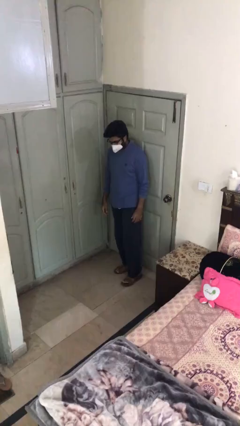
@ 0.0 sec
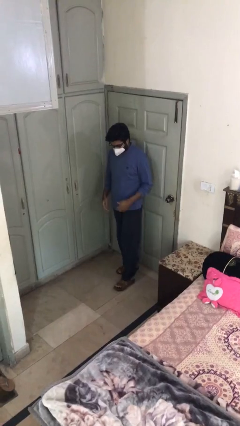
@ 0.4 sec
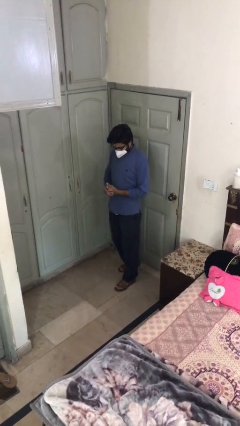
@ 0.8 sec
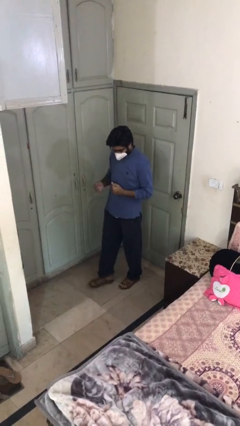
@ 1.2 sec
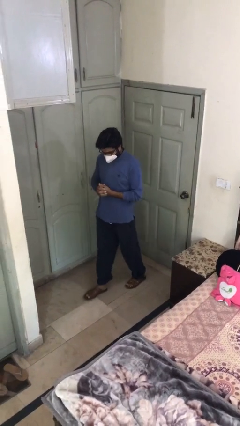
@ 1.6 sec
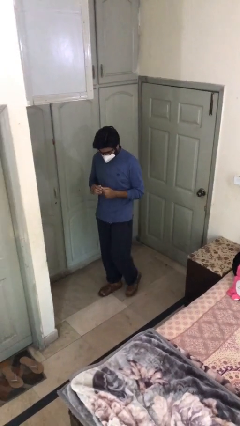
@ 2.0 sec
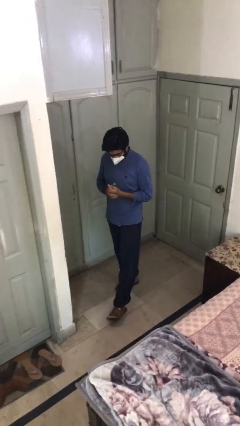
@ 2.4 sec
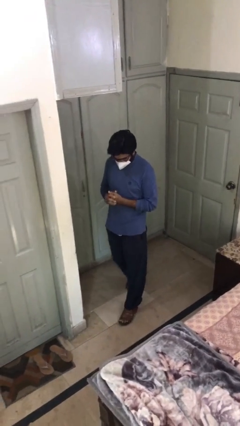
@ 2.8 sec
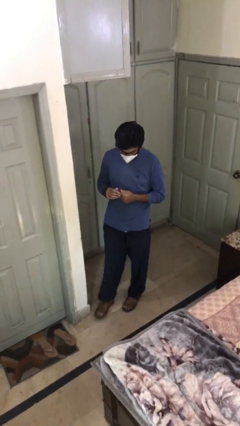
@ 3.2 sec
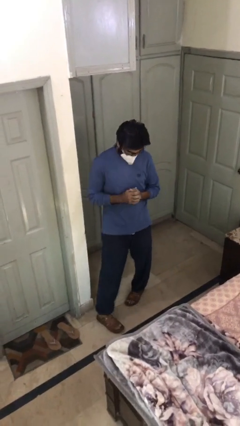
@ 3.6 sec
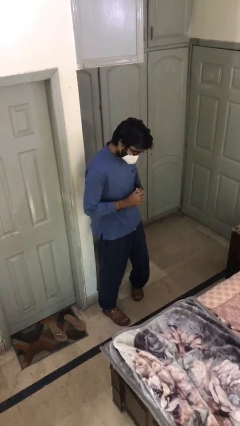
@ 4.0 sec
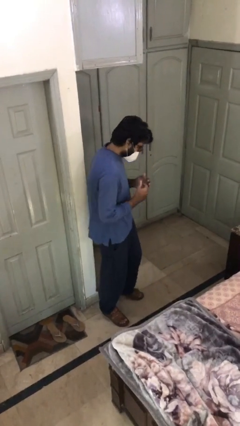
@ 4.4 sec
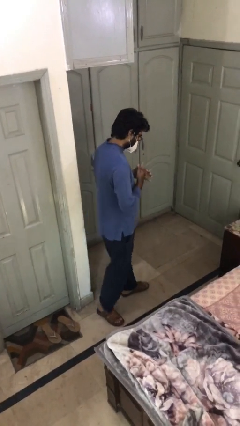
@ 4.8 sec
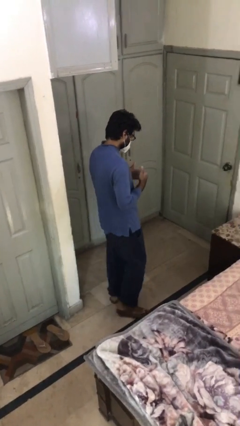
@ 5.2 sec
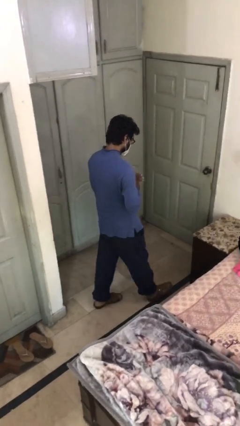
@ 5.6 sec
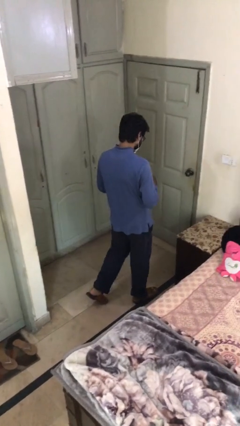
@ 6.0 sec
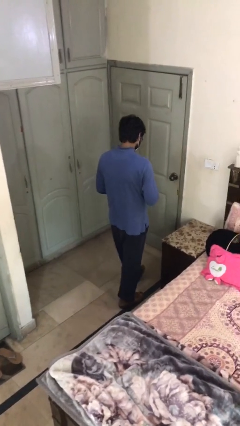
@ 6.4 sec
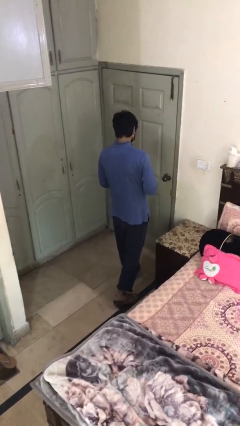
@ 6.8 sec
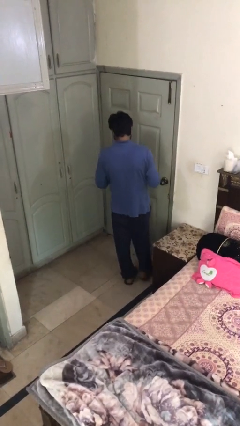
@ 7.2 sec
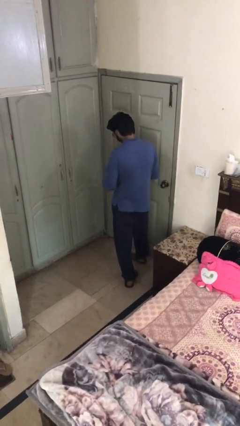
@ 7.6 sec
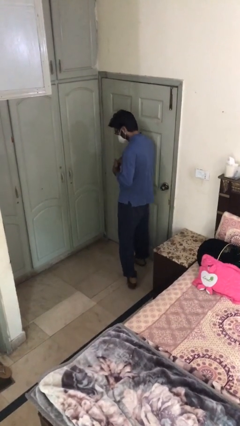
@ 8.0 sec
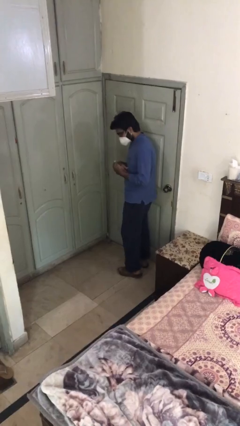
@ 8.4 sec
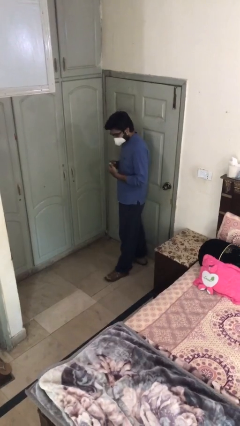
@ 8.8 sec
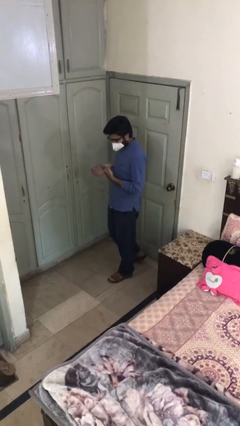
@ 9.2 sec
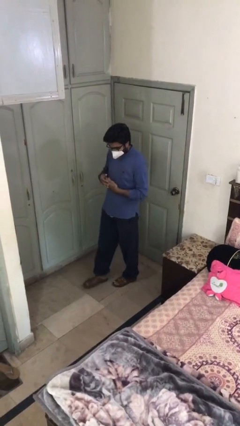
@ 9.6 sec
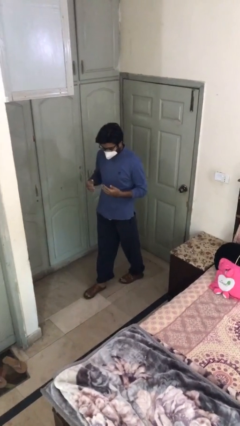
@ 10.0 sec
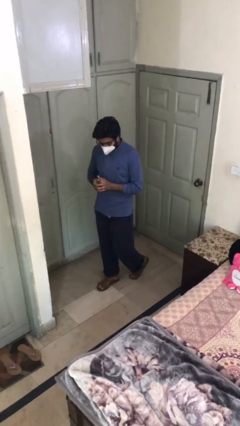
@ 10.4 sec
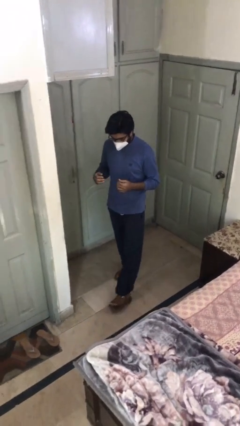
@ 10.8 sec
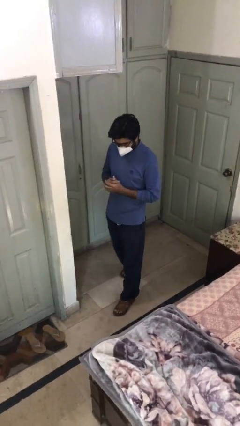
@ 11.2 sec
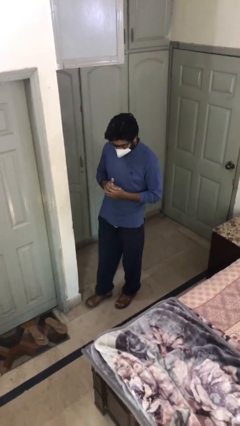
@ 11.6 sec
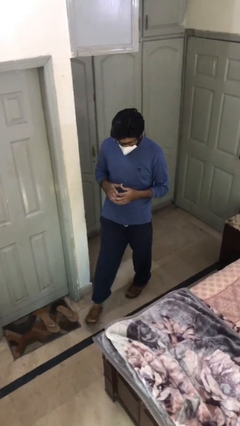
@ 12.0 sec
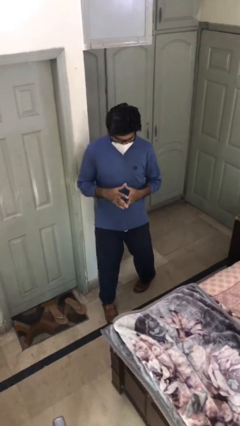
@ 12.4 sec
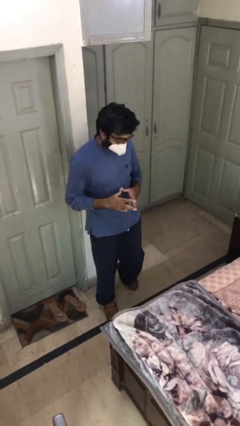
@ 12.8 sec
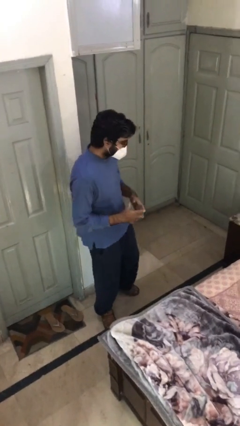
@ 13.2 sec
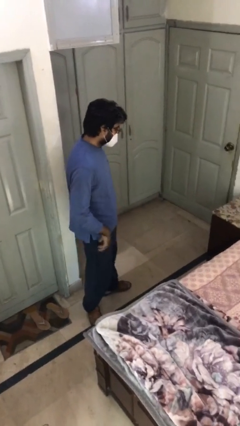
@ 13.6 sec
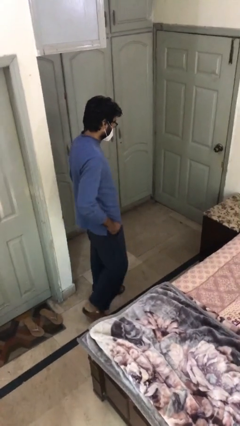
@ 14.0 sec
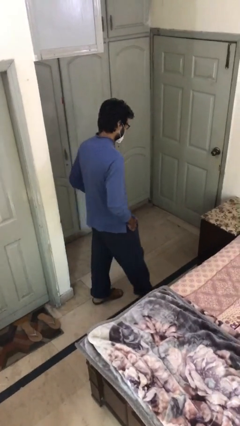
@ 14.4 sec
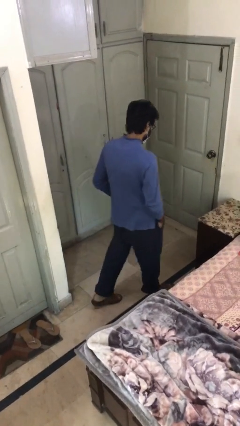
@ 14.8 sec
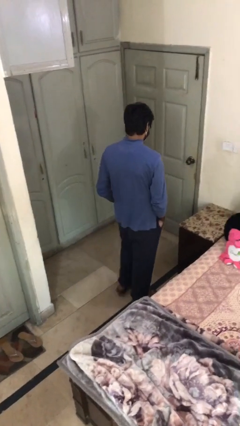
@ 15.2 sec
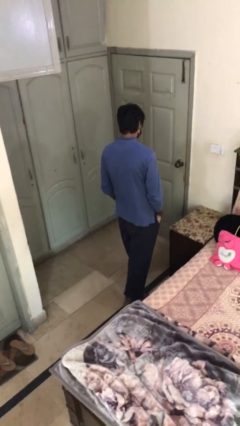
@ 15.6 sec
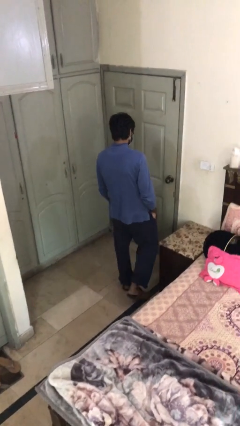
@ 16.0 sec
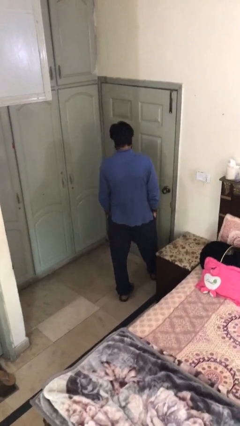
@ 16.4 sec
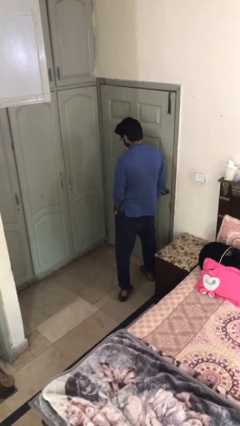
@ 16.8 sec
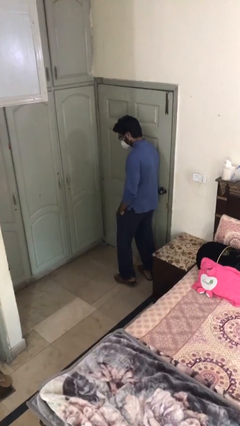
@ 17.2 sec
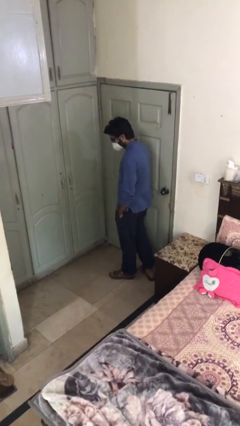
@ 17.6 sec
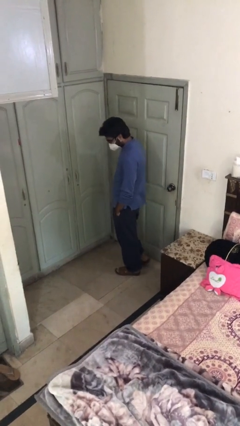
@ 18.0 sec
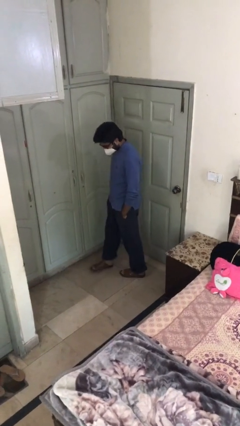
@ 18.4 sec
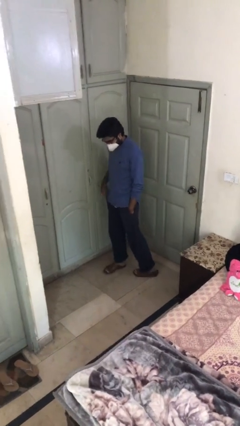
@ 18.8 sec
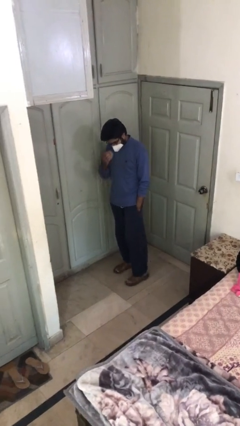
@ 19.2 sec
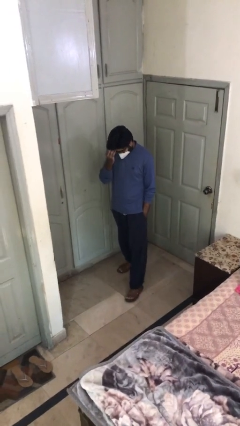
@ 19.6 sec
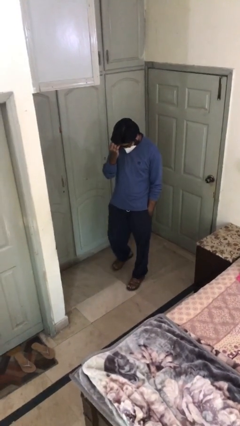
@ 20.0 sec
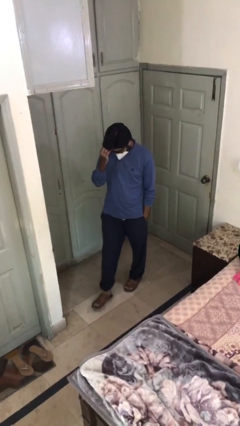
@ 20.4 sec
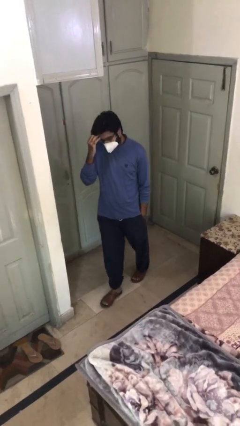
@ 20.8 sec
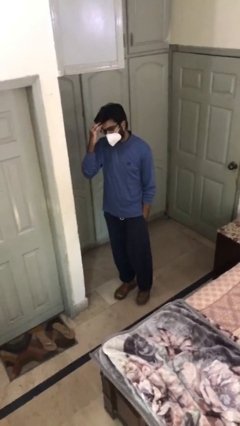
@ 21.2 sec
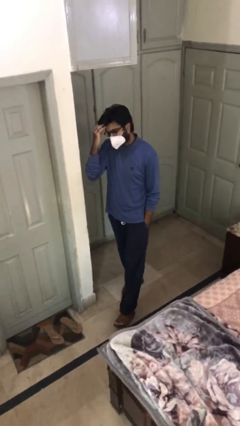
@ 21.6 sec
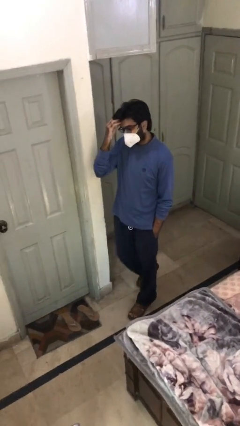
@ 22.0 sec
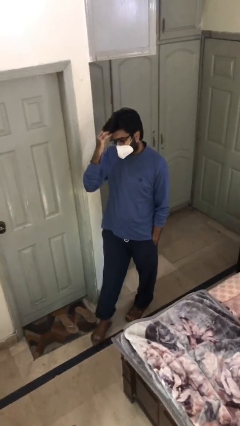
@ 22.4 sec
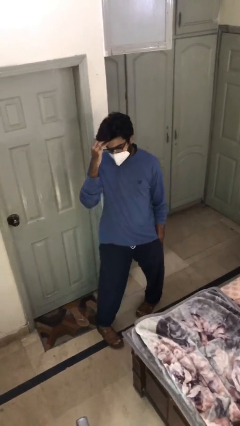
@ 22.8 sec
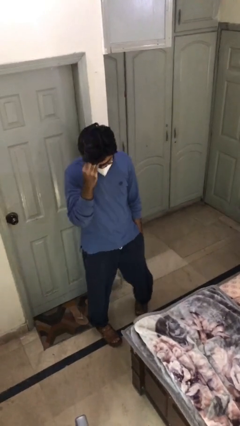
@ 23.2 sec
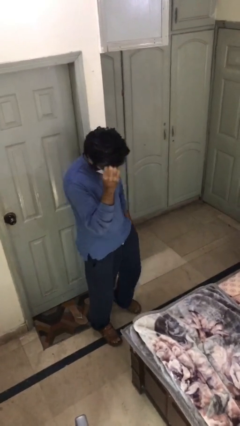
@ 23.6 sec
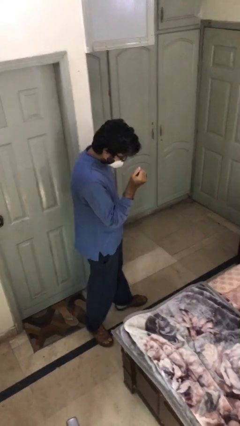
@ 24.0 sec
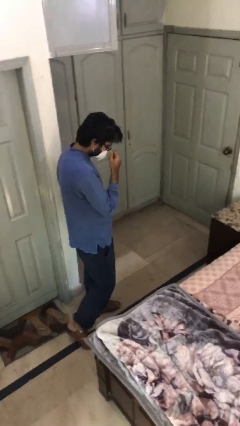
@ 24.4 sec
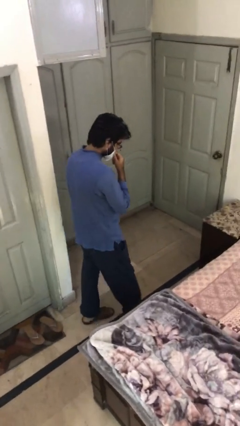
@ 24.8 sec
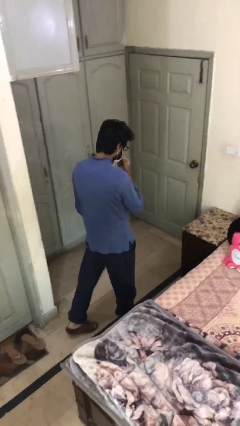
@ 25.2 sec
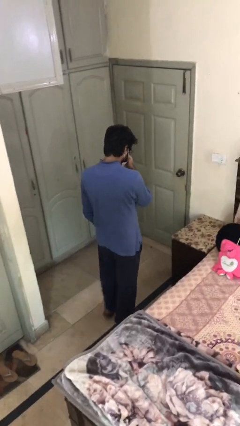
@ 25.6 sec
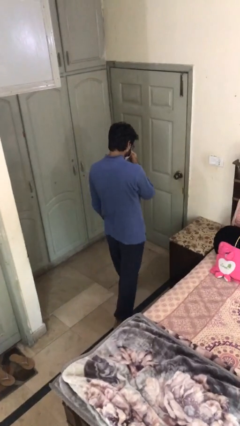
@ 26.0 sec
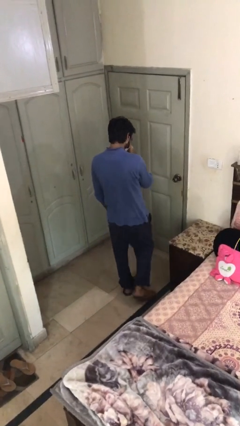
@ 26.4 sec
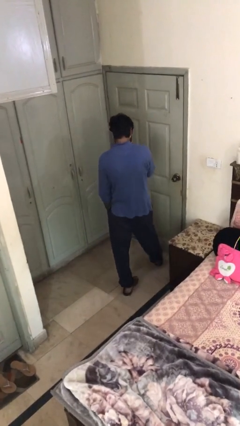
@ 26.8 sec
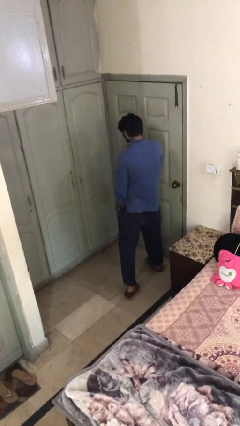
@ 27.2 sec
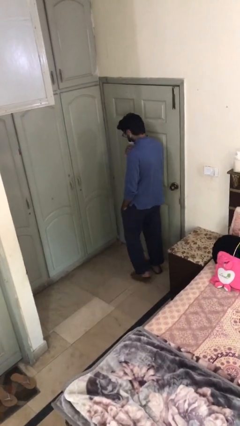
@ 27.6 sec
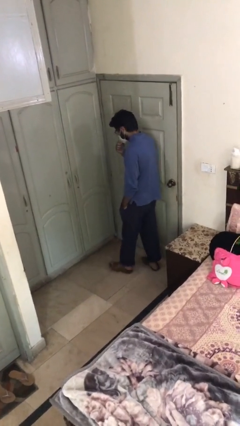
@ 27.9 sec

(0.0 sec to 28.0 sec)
person walks

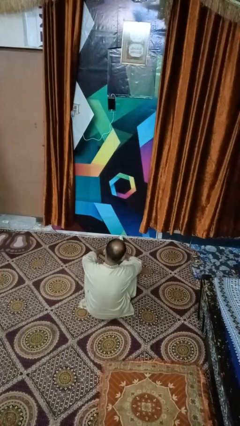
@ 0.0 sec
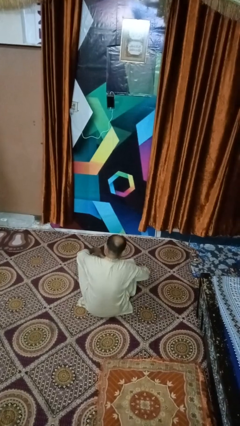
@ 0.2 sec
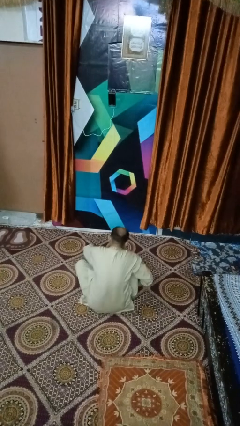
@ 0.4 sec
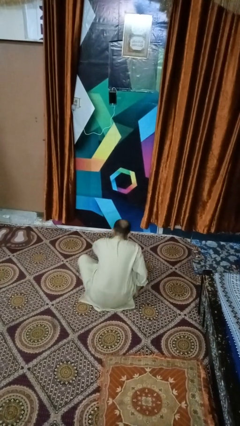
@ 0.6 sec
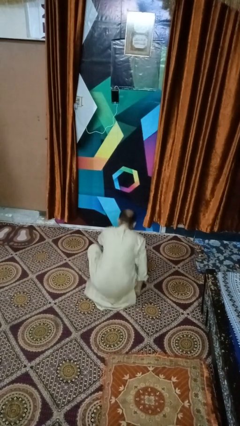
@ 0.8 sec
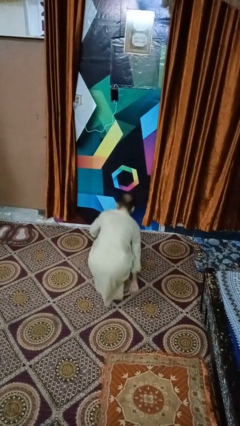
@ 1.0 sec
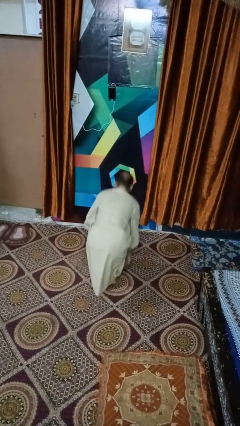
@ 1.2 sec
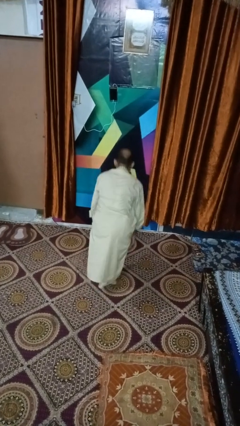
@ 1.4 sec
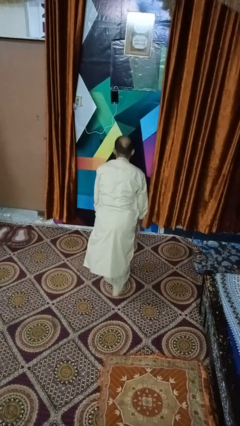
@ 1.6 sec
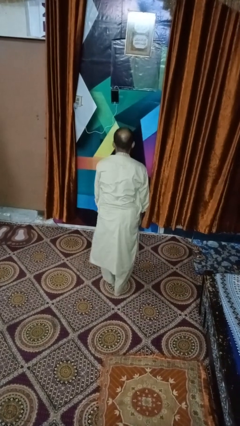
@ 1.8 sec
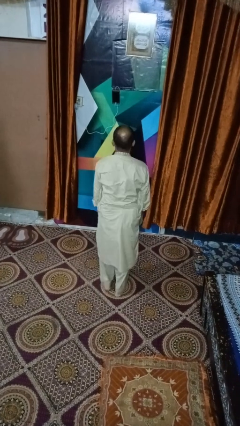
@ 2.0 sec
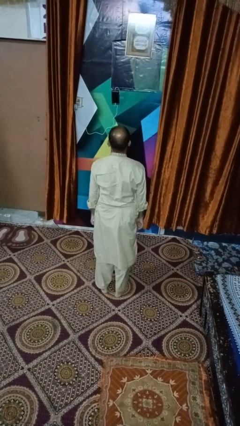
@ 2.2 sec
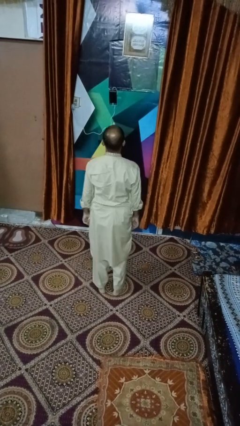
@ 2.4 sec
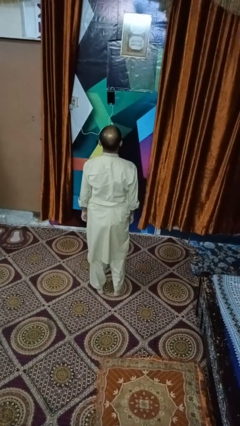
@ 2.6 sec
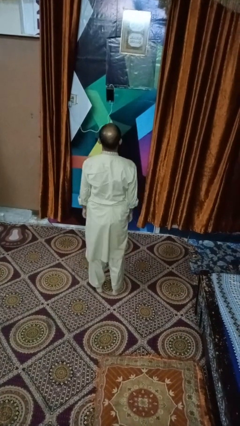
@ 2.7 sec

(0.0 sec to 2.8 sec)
person stands up from floor

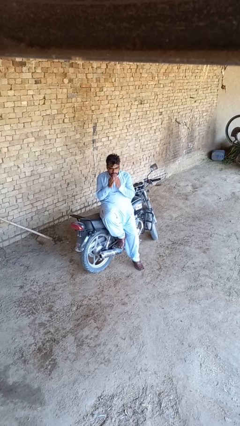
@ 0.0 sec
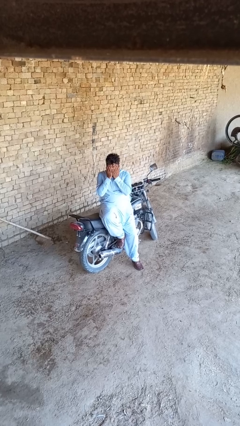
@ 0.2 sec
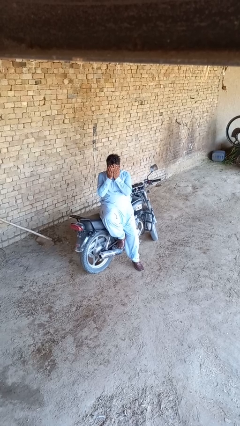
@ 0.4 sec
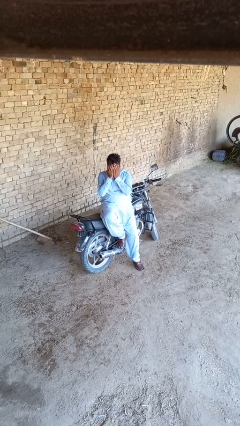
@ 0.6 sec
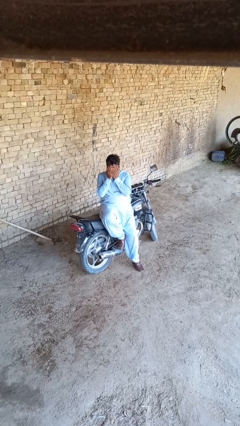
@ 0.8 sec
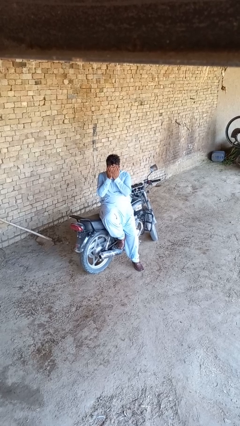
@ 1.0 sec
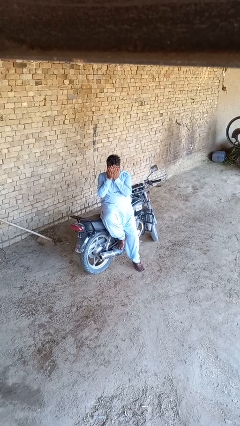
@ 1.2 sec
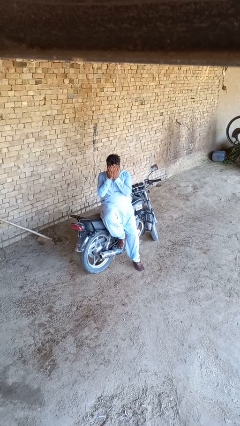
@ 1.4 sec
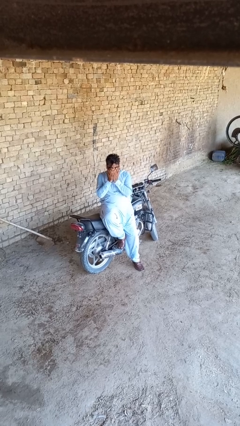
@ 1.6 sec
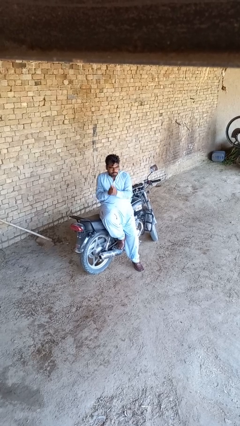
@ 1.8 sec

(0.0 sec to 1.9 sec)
person covers face with hands
